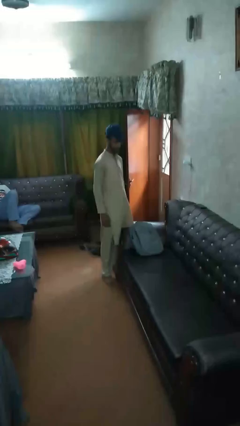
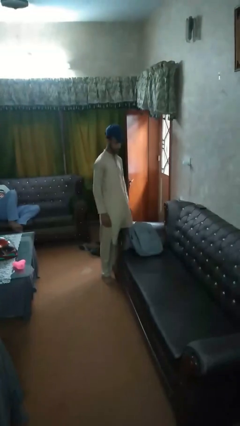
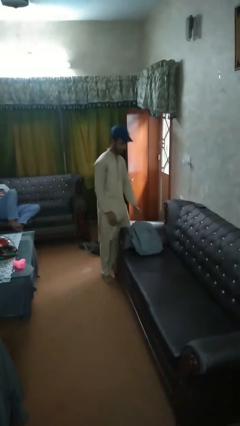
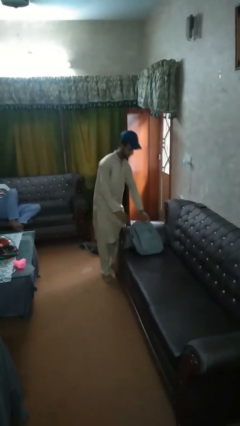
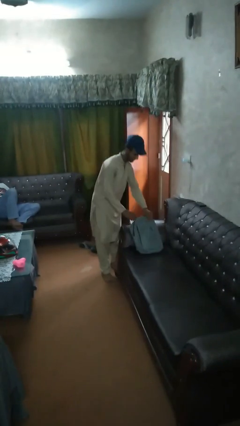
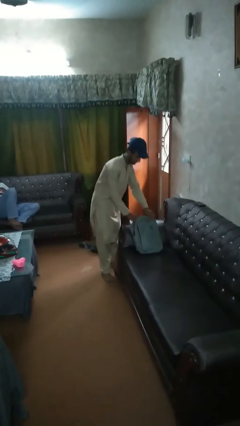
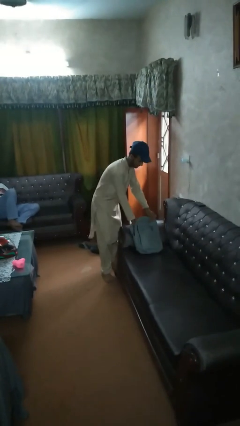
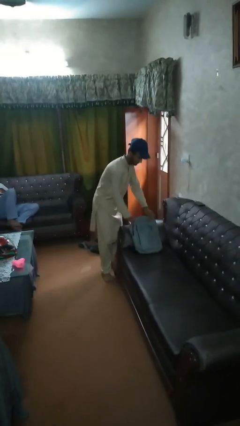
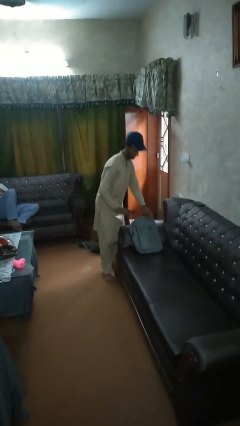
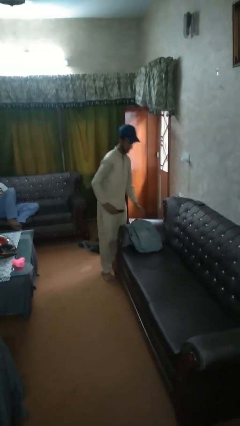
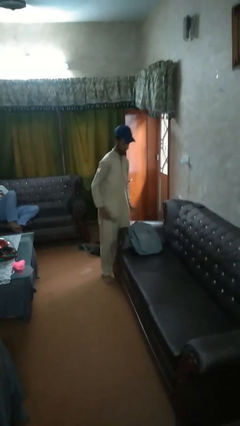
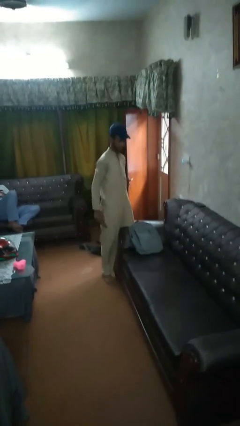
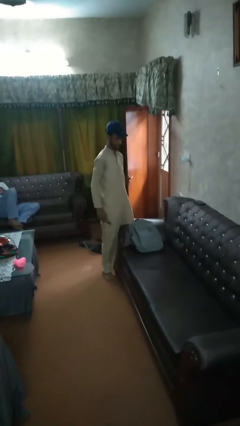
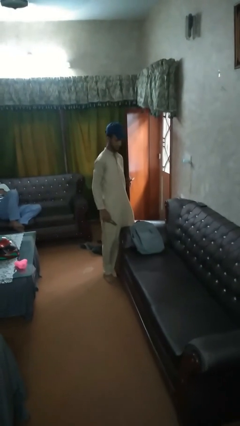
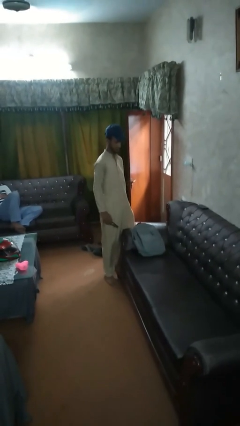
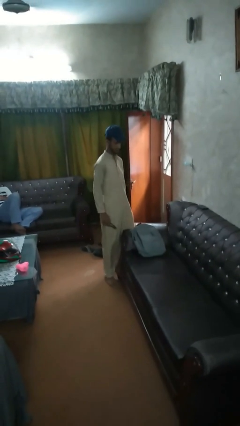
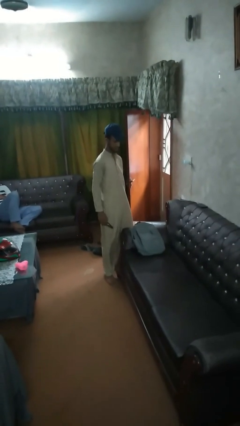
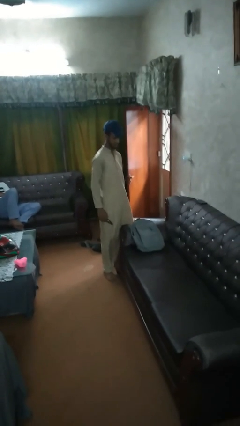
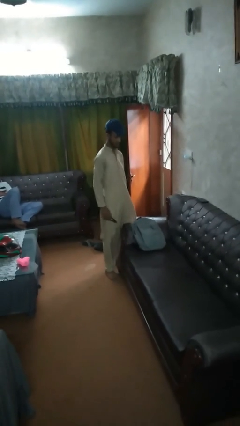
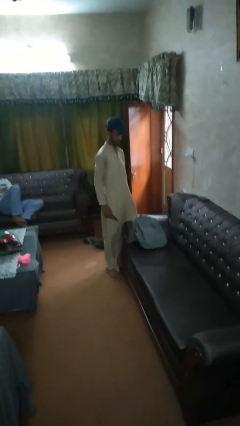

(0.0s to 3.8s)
person takes object from bag

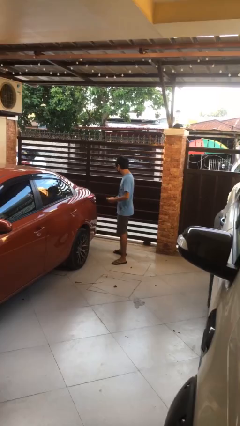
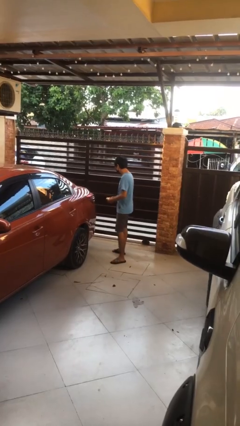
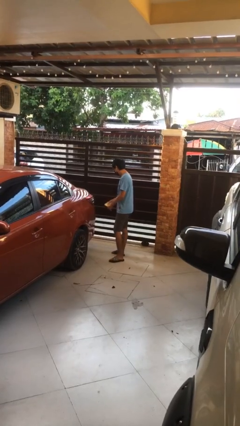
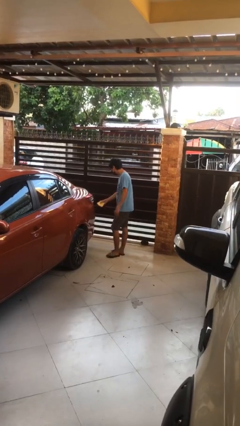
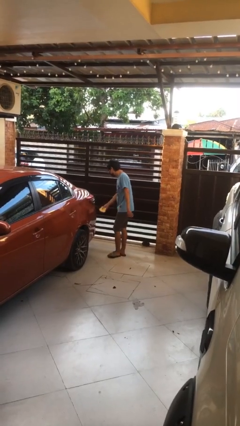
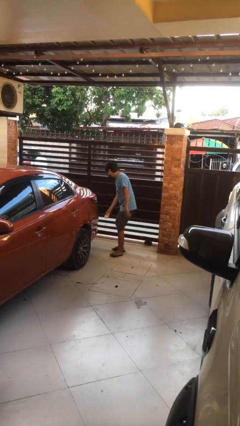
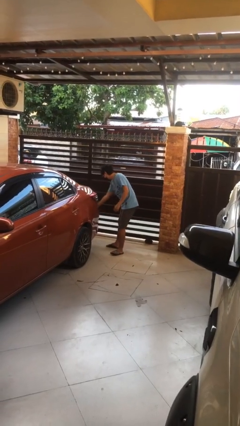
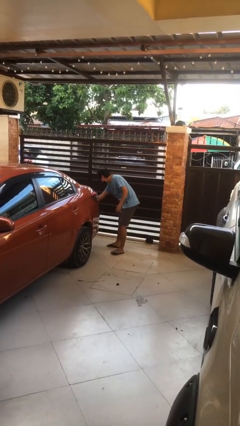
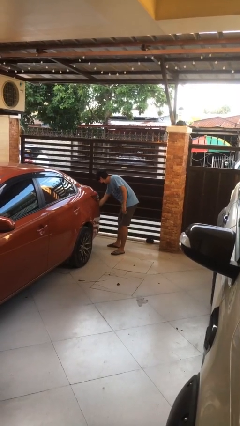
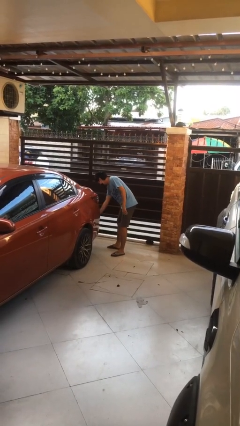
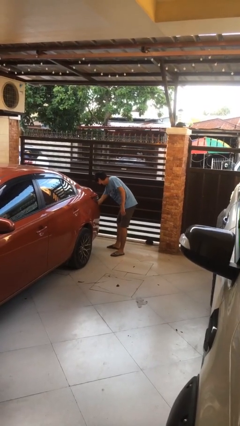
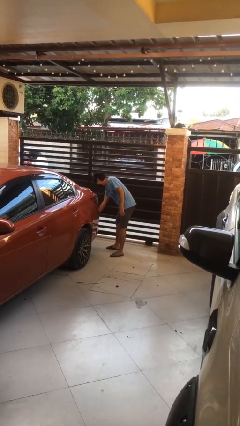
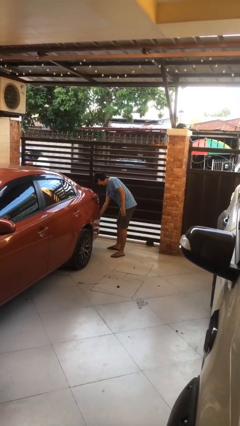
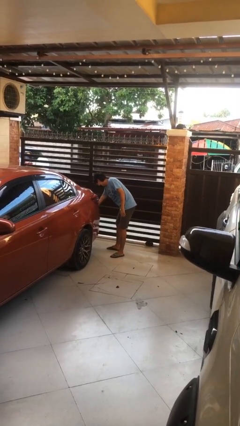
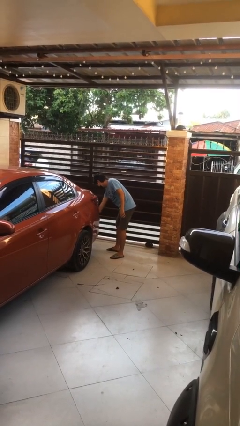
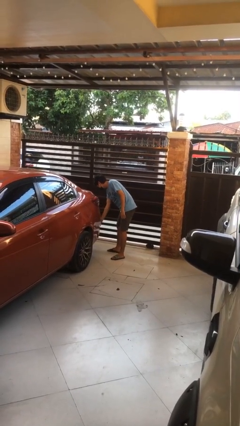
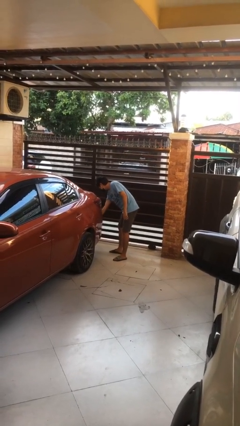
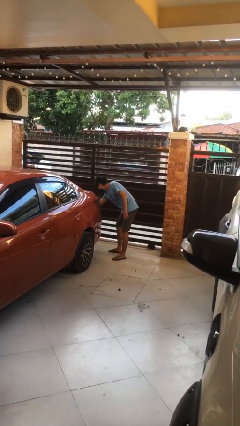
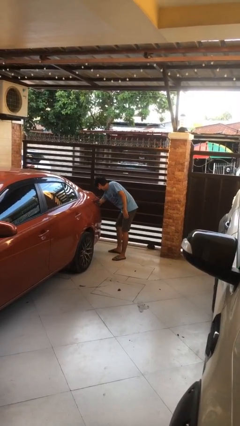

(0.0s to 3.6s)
person polishes car with rag

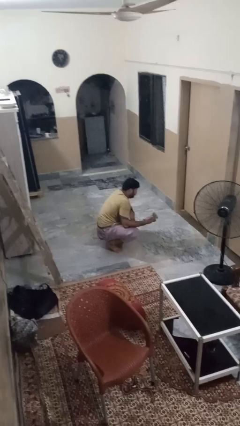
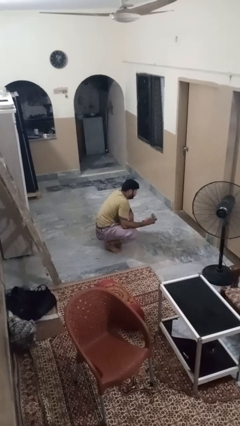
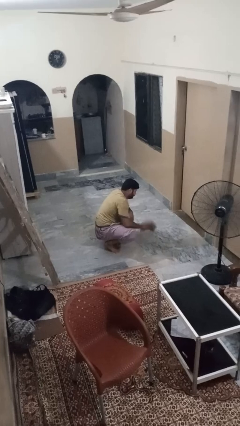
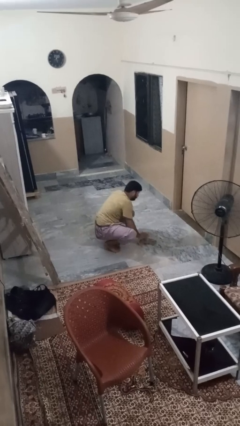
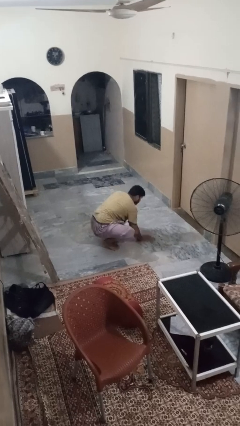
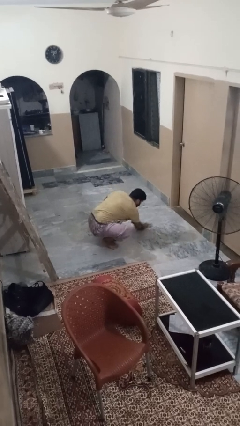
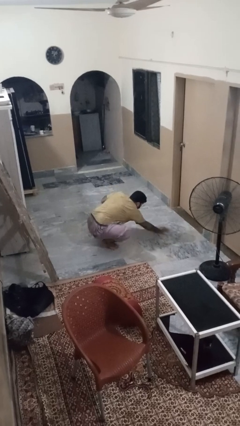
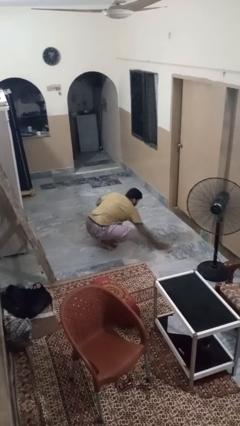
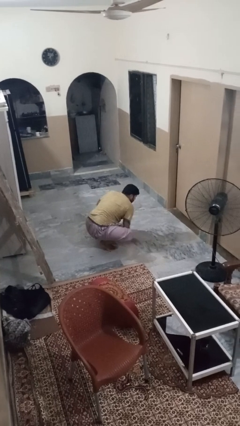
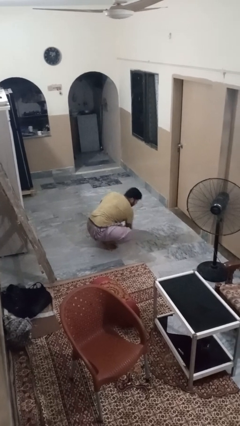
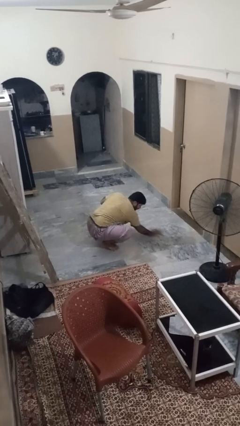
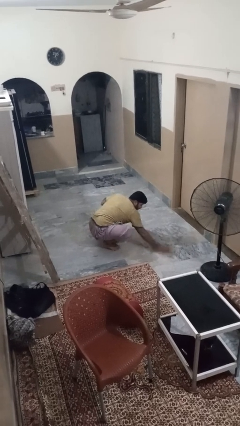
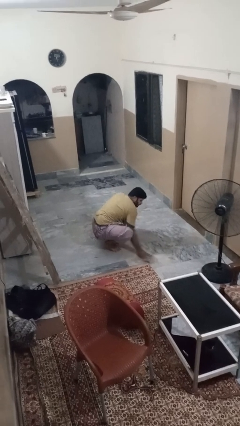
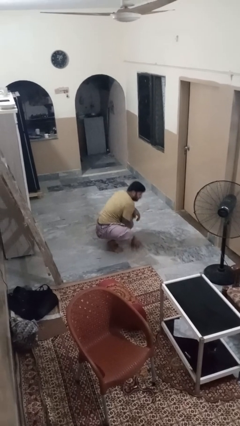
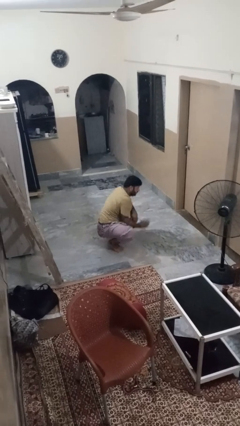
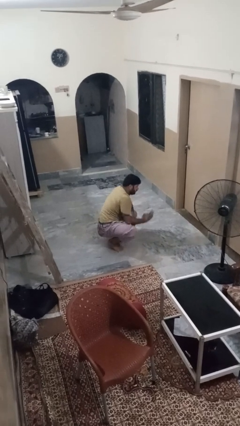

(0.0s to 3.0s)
person mops

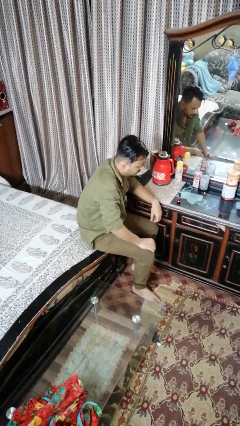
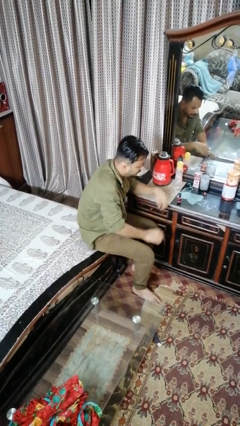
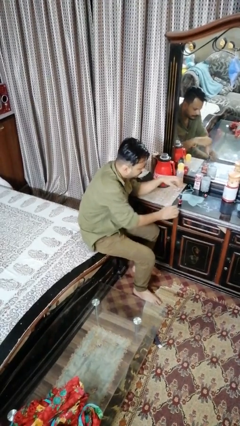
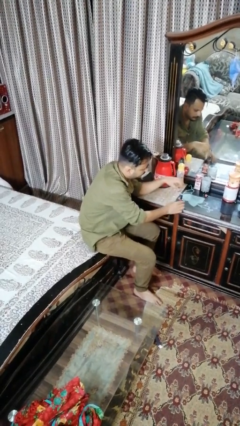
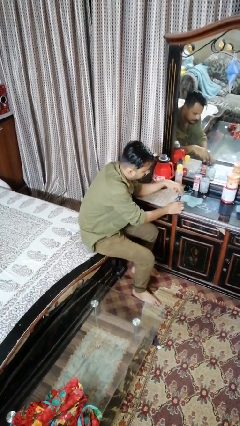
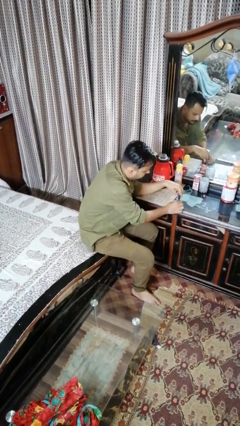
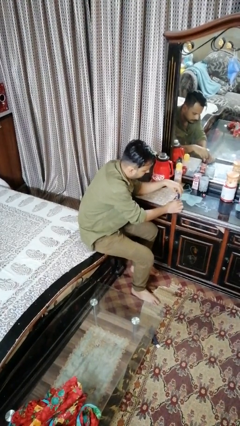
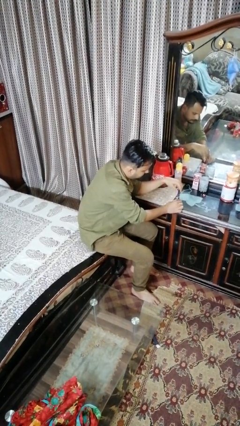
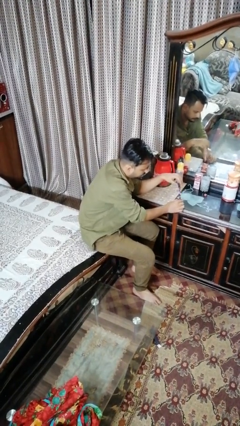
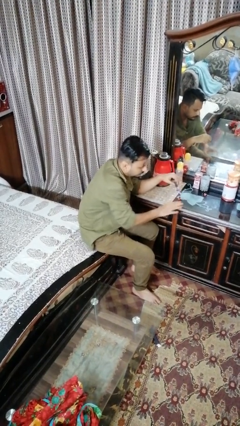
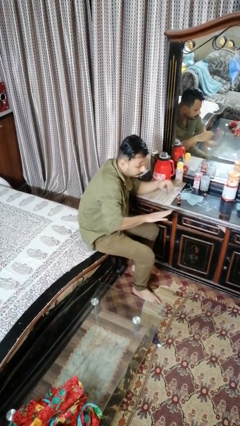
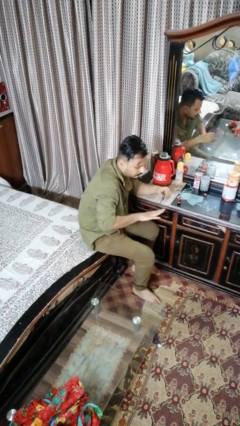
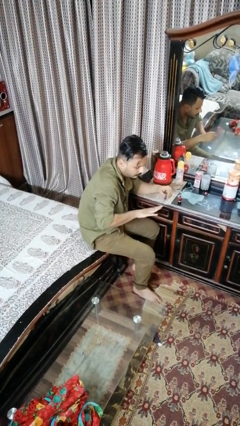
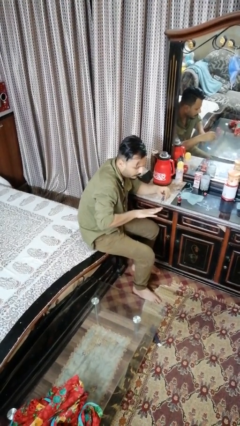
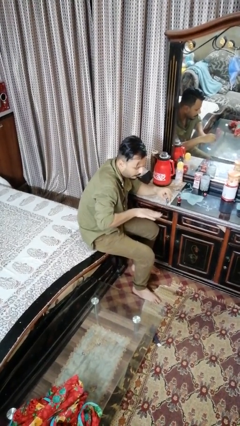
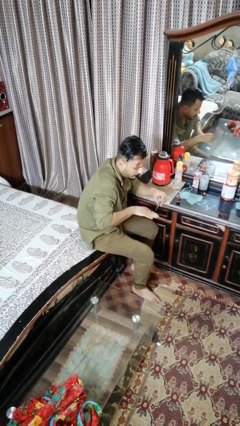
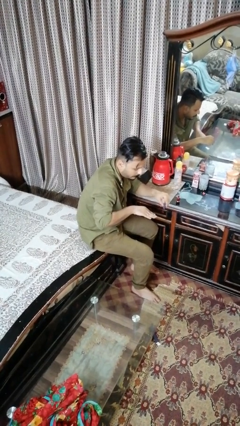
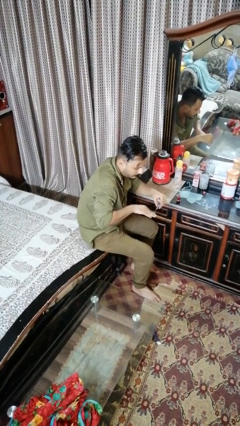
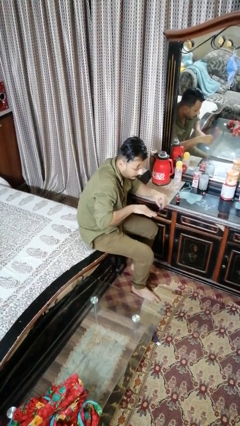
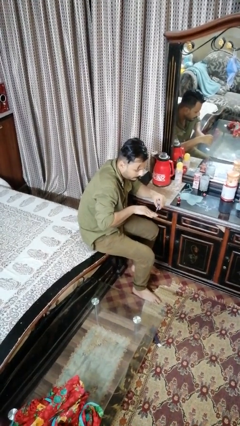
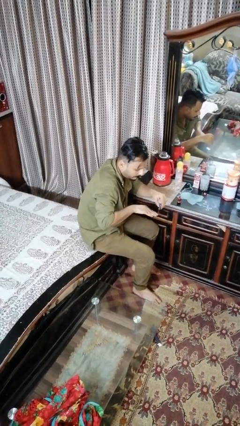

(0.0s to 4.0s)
person paints fingernails

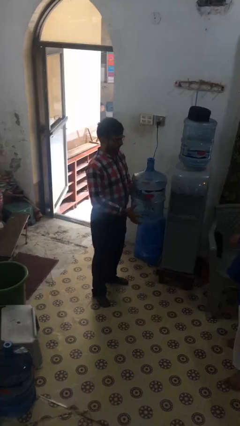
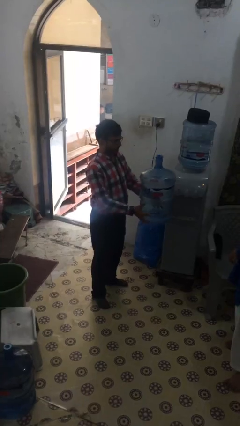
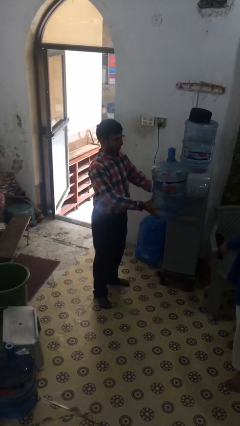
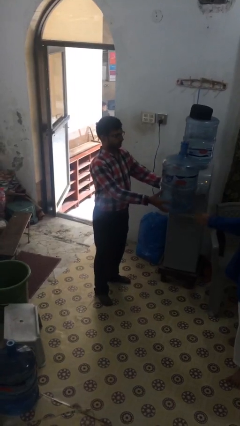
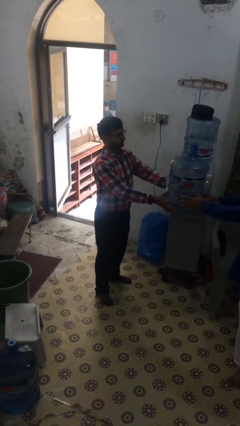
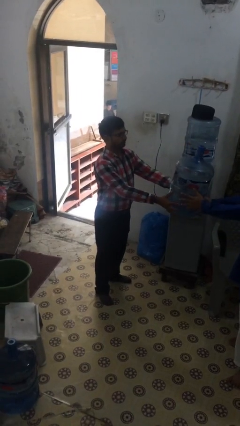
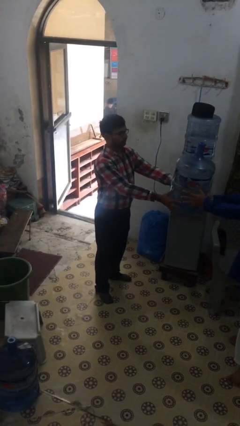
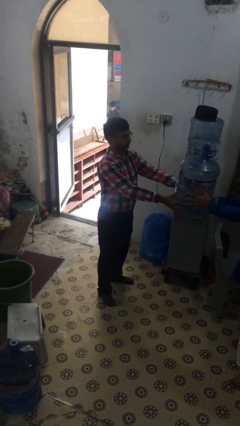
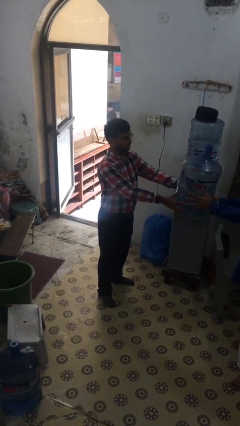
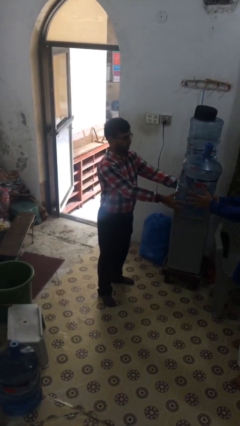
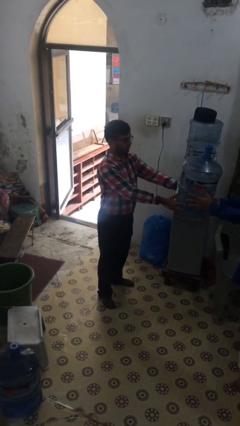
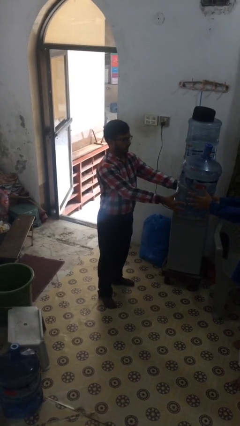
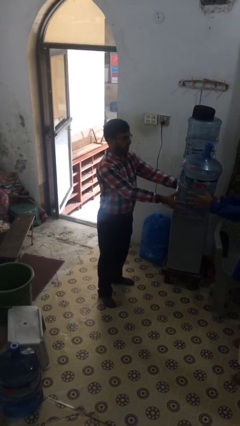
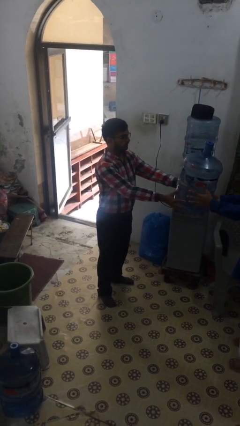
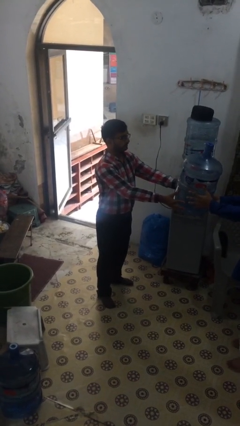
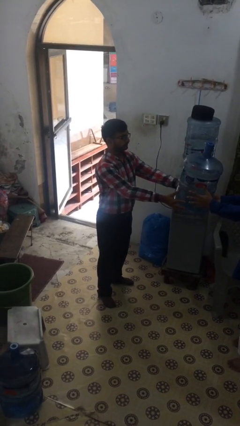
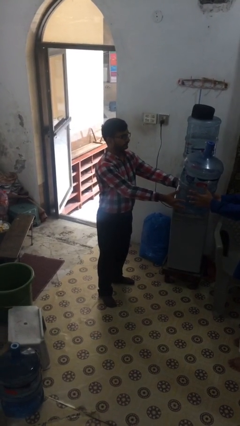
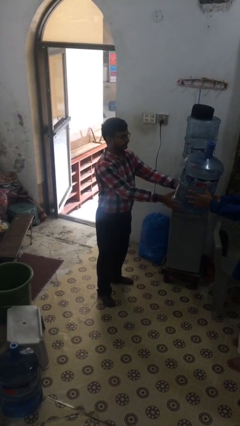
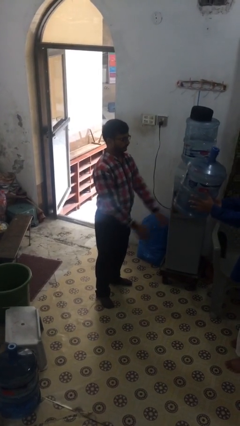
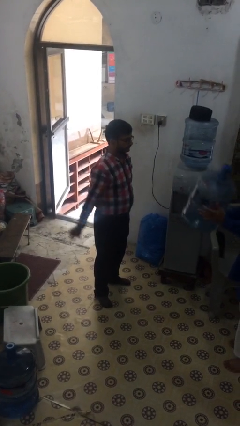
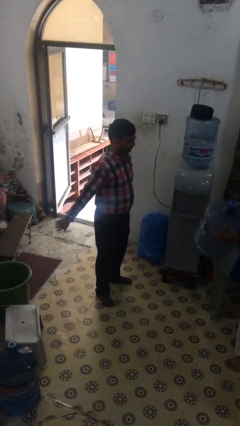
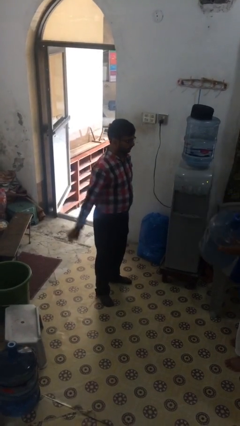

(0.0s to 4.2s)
person transfers object to person
